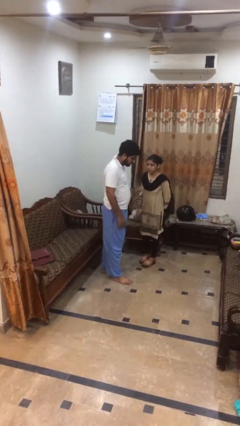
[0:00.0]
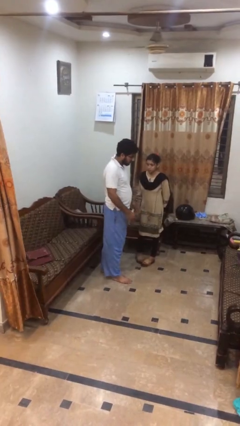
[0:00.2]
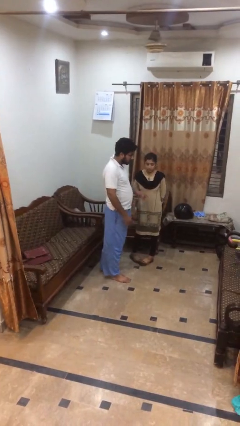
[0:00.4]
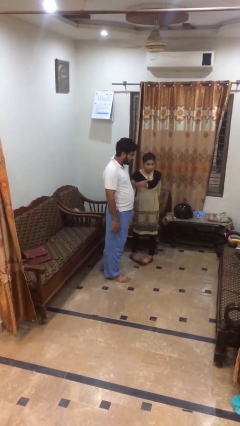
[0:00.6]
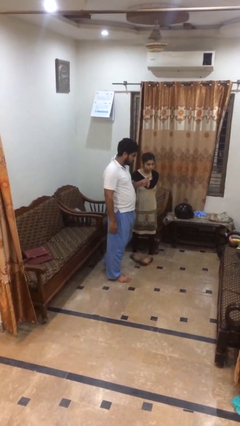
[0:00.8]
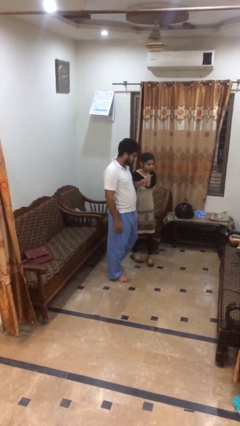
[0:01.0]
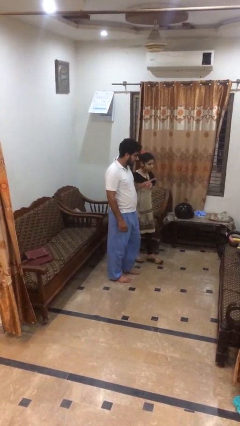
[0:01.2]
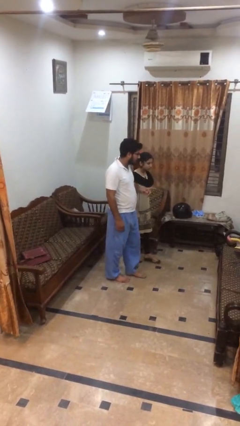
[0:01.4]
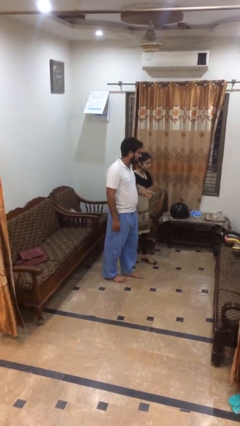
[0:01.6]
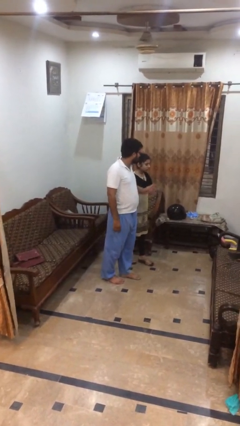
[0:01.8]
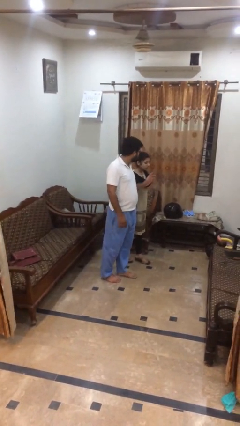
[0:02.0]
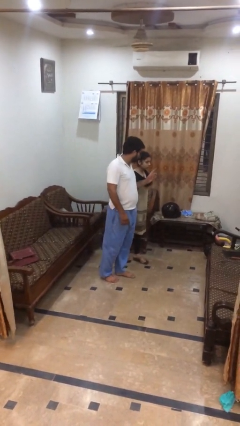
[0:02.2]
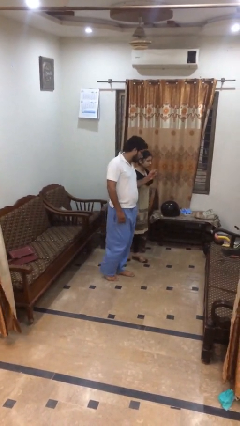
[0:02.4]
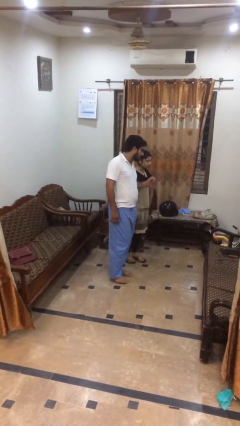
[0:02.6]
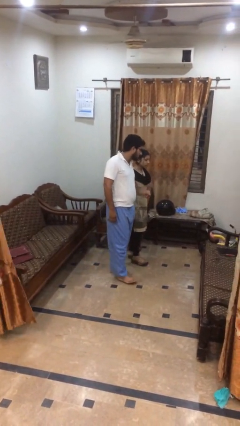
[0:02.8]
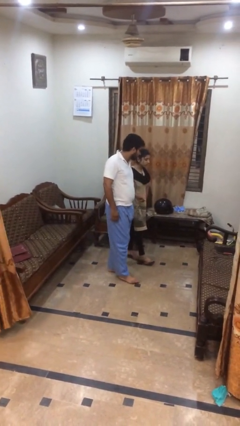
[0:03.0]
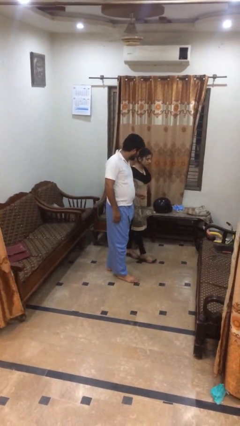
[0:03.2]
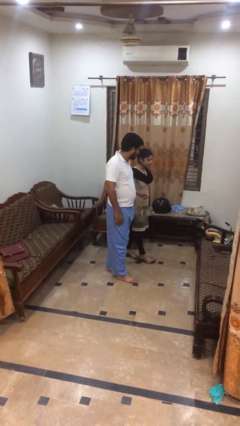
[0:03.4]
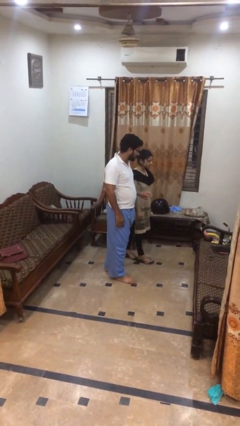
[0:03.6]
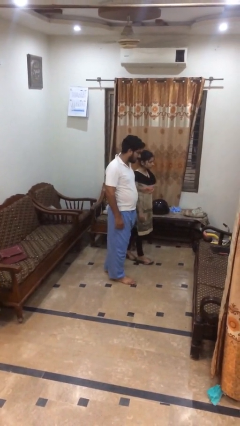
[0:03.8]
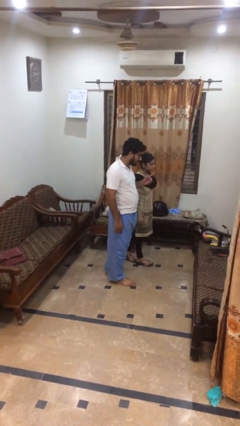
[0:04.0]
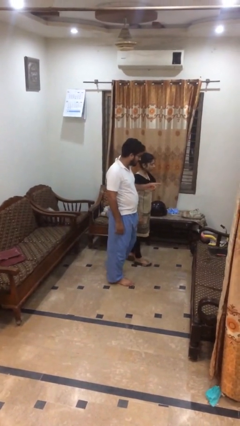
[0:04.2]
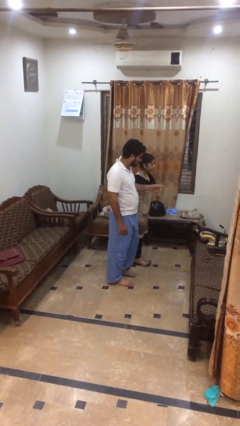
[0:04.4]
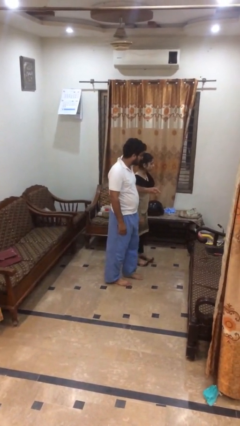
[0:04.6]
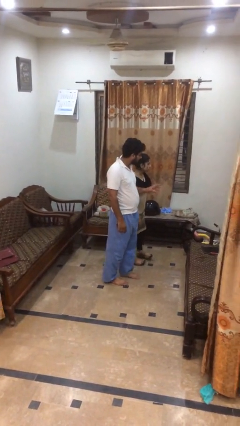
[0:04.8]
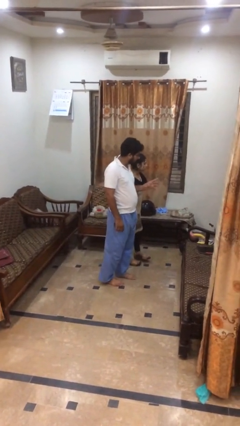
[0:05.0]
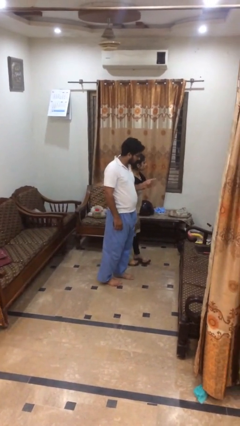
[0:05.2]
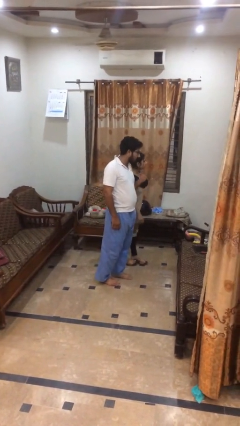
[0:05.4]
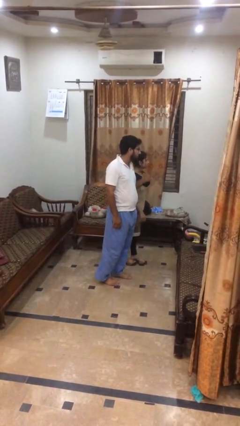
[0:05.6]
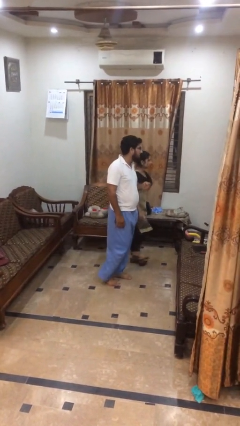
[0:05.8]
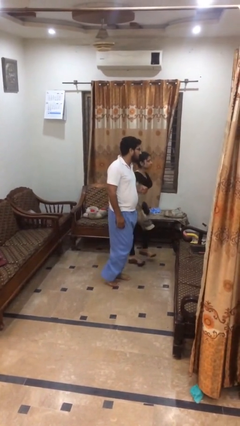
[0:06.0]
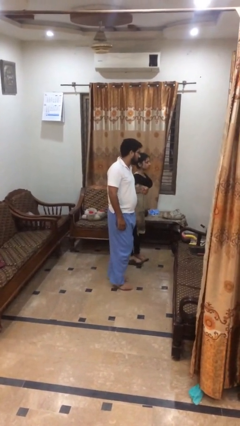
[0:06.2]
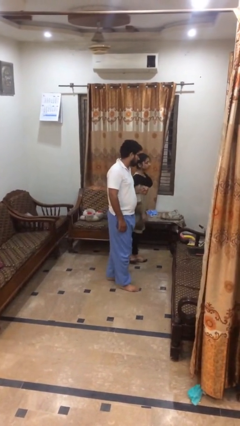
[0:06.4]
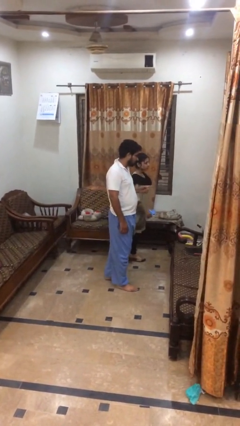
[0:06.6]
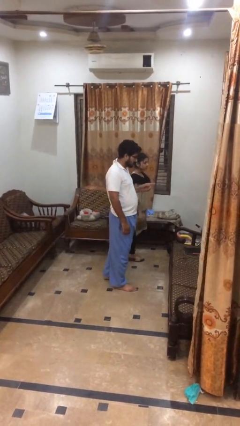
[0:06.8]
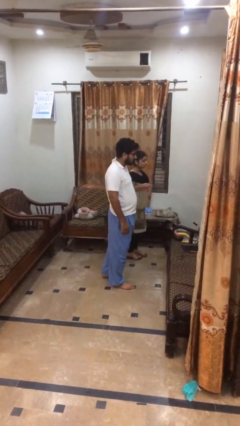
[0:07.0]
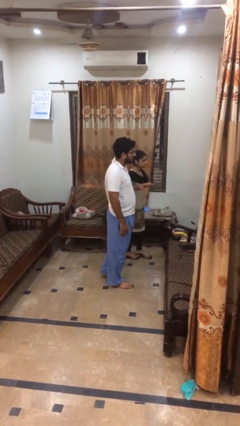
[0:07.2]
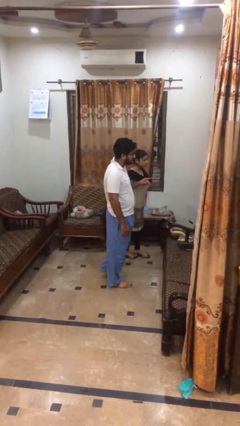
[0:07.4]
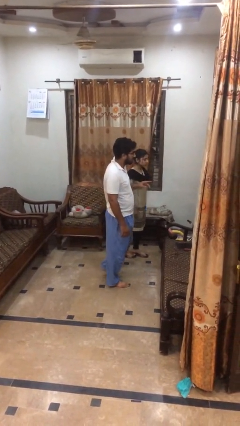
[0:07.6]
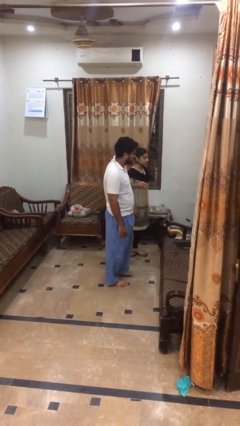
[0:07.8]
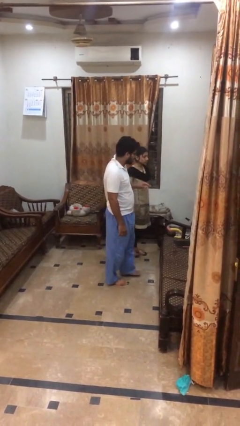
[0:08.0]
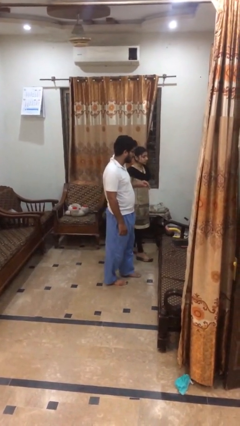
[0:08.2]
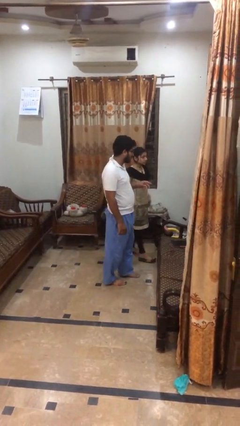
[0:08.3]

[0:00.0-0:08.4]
person talks to person

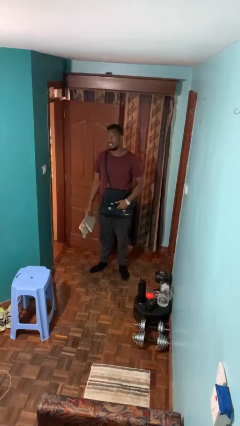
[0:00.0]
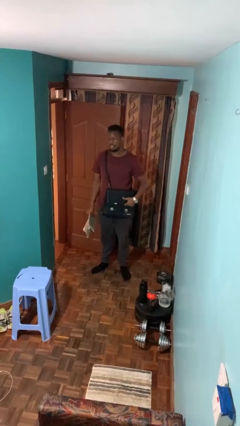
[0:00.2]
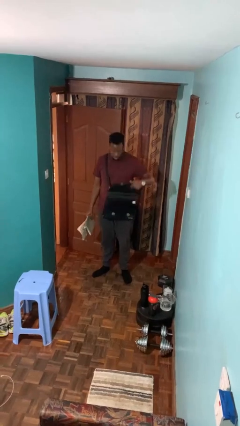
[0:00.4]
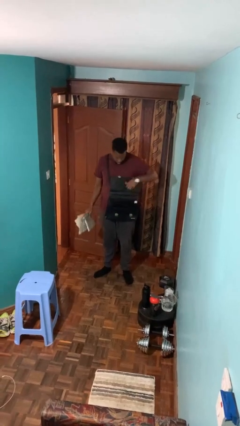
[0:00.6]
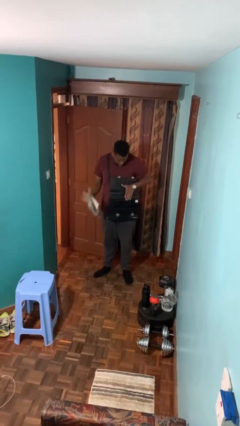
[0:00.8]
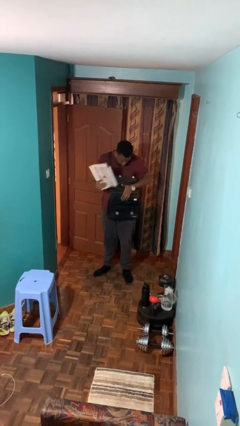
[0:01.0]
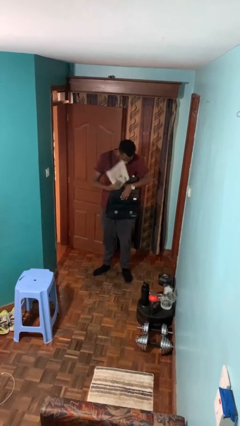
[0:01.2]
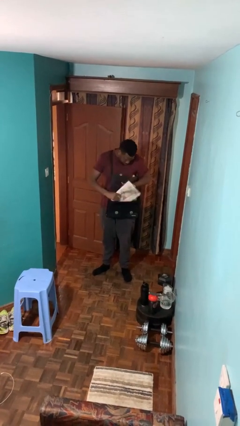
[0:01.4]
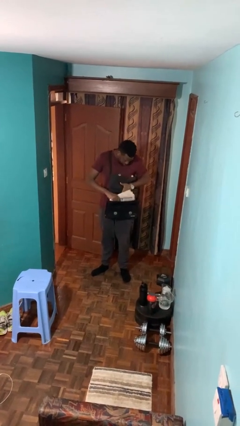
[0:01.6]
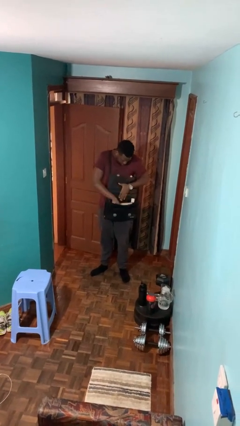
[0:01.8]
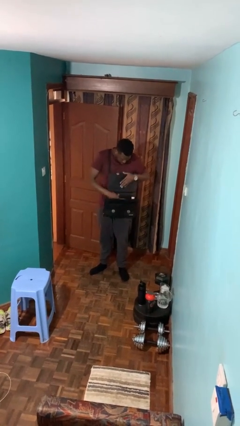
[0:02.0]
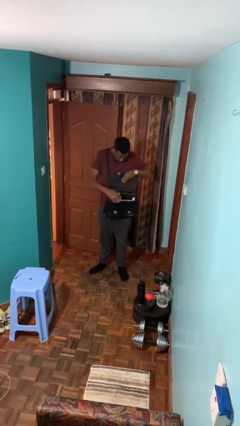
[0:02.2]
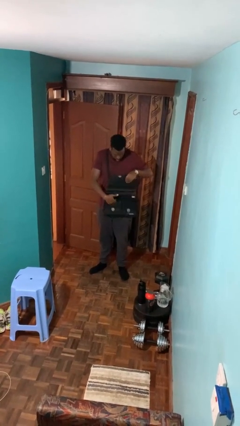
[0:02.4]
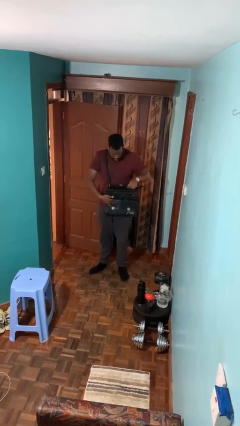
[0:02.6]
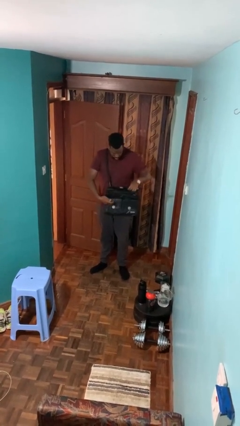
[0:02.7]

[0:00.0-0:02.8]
person puts object into purse

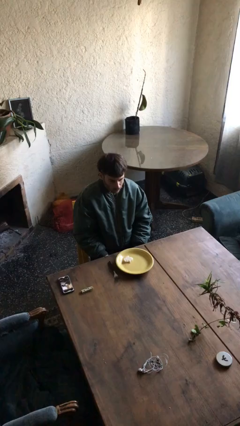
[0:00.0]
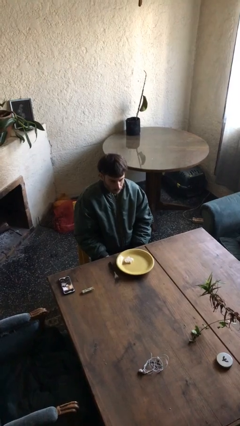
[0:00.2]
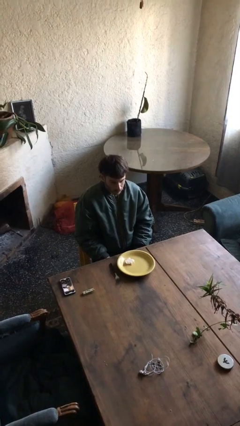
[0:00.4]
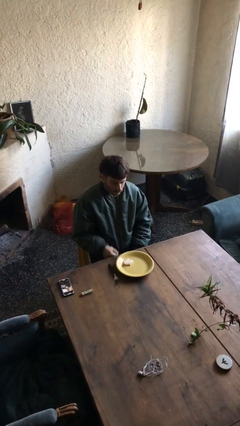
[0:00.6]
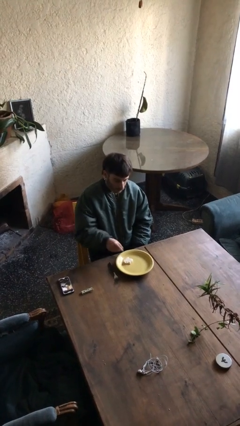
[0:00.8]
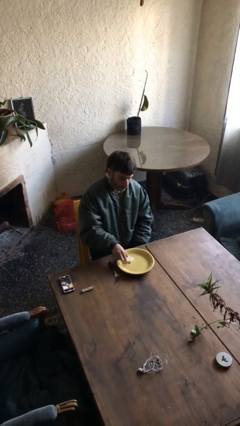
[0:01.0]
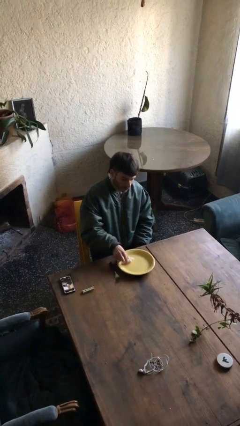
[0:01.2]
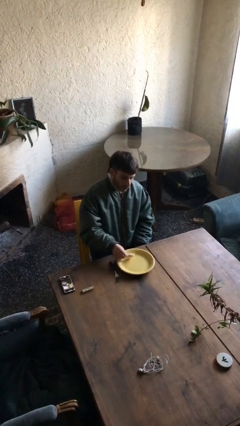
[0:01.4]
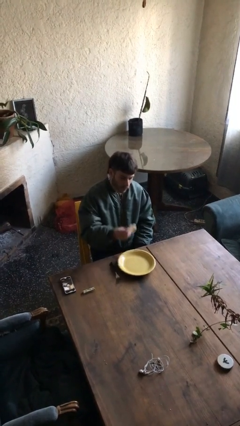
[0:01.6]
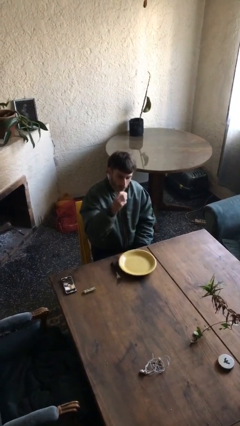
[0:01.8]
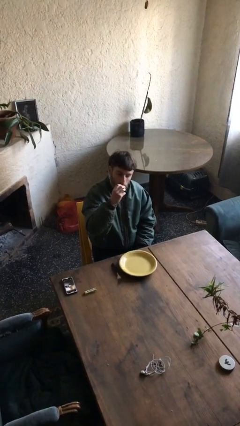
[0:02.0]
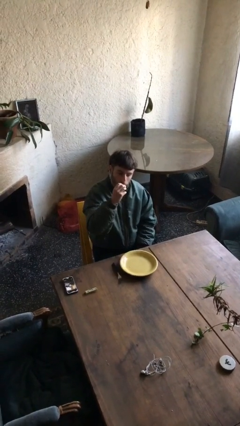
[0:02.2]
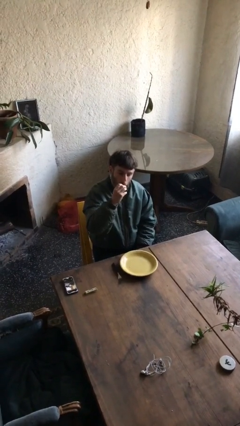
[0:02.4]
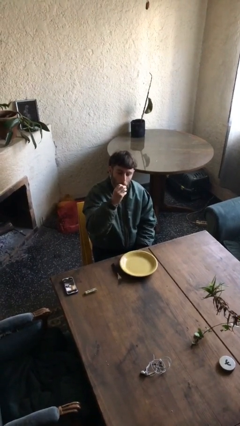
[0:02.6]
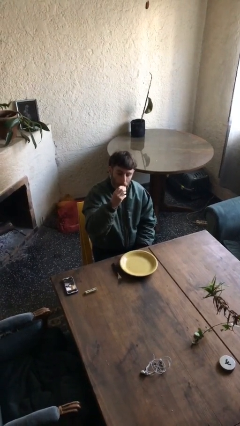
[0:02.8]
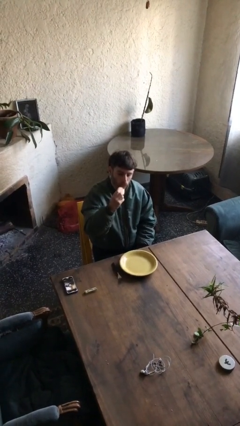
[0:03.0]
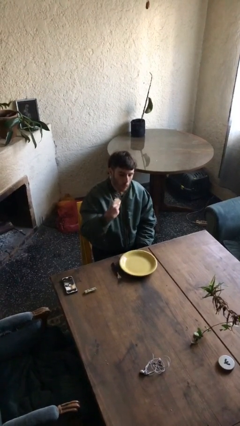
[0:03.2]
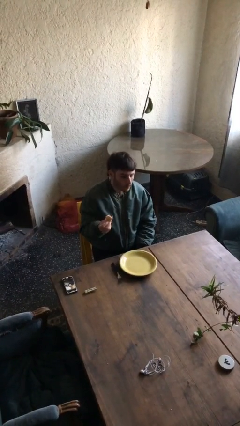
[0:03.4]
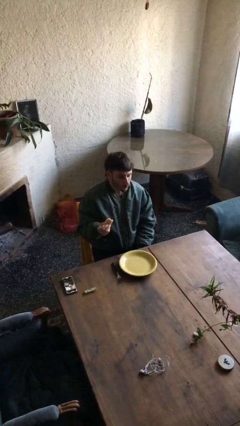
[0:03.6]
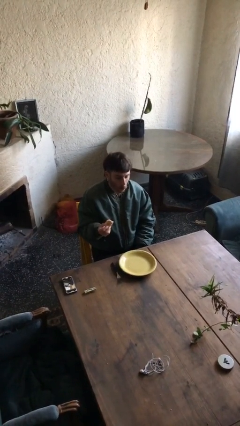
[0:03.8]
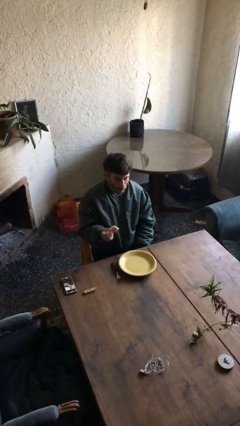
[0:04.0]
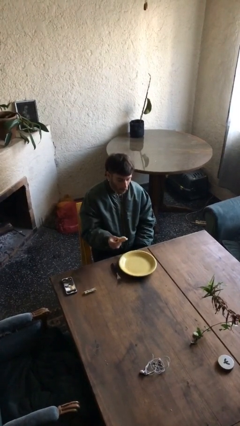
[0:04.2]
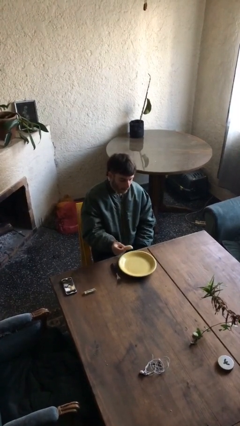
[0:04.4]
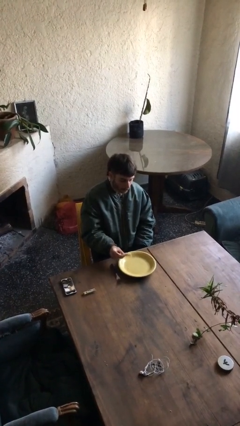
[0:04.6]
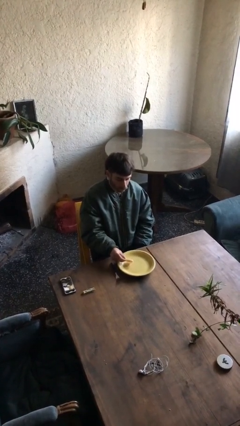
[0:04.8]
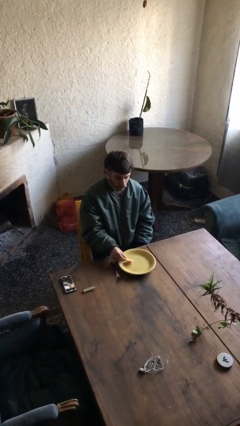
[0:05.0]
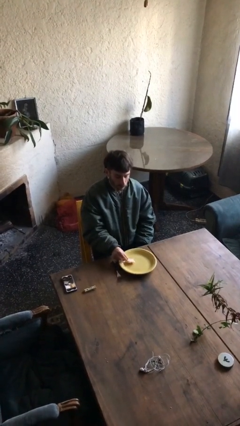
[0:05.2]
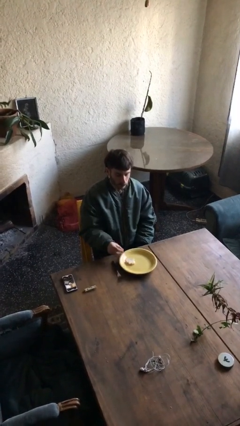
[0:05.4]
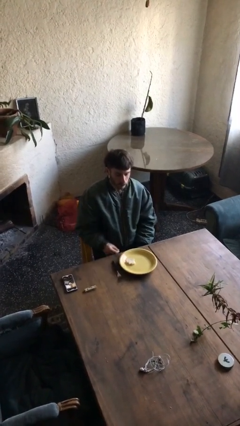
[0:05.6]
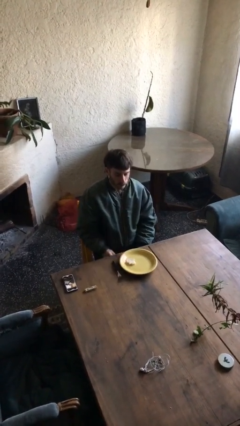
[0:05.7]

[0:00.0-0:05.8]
person eats with hands

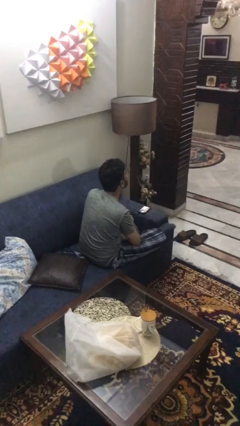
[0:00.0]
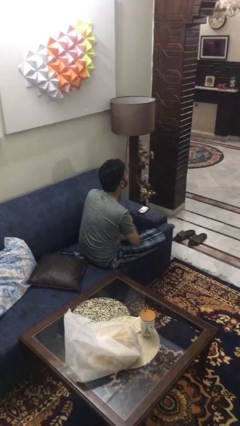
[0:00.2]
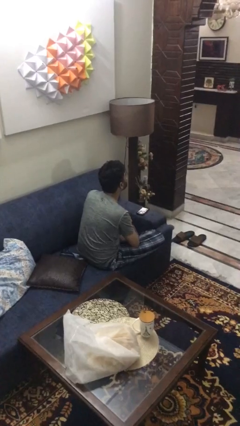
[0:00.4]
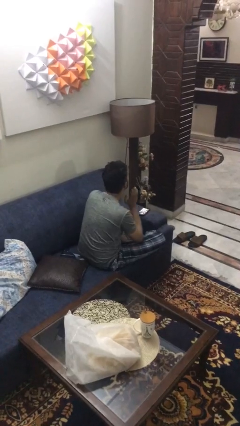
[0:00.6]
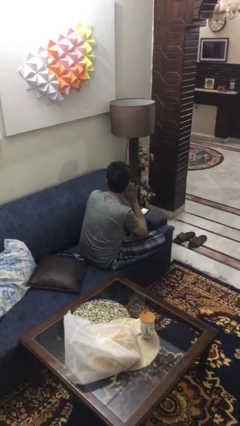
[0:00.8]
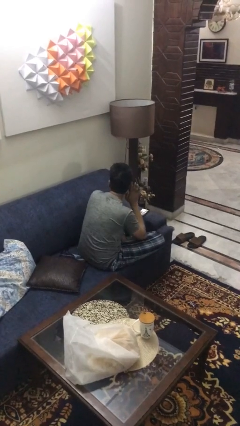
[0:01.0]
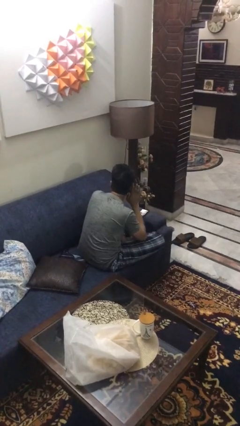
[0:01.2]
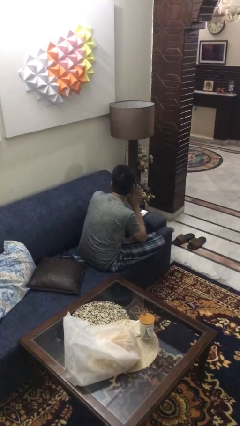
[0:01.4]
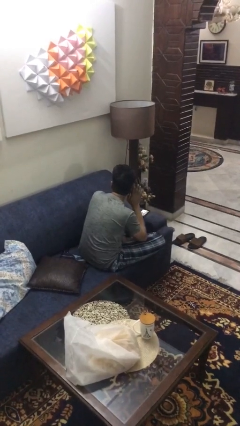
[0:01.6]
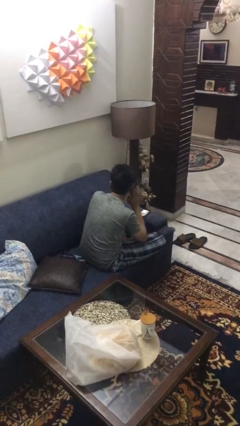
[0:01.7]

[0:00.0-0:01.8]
person gestures listen closely
